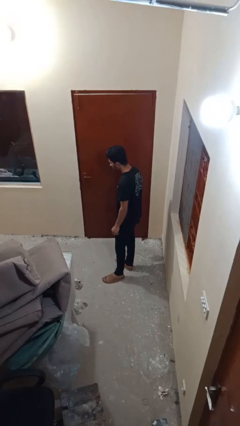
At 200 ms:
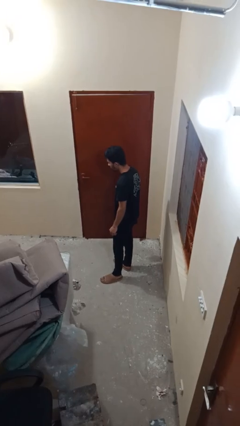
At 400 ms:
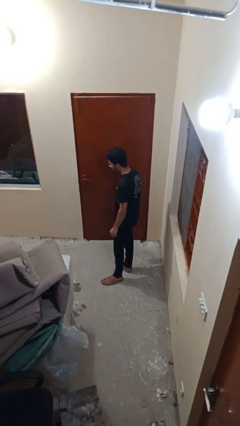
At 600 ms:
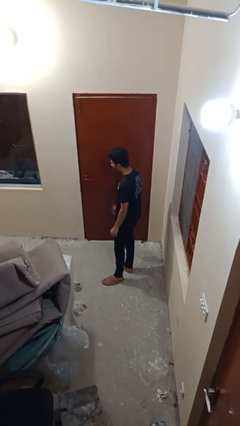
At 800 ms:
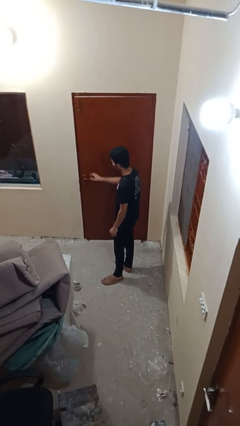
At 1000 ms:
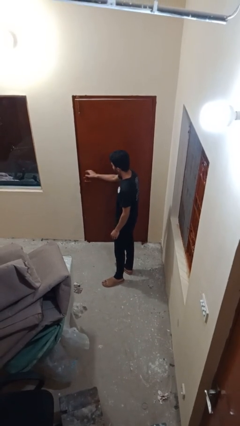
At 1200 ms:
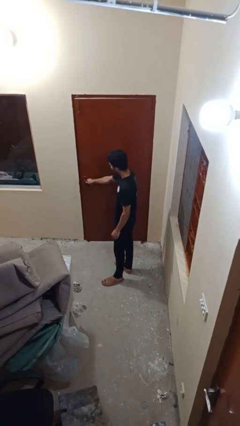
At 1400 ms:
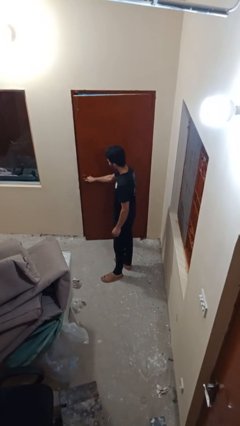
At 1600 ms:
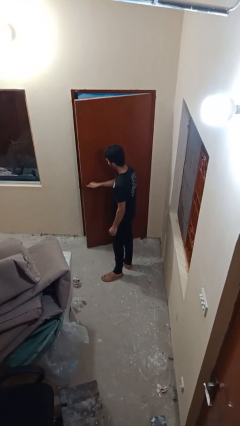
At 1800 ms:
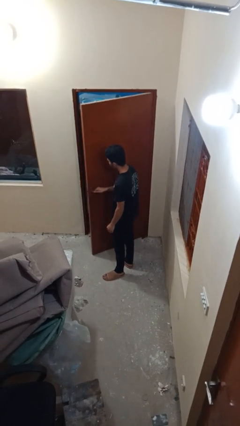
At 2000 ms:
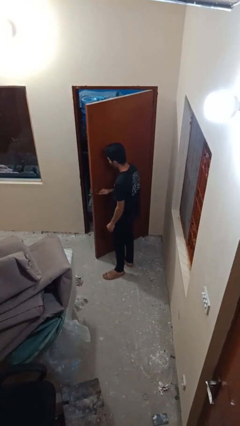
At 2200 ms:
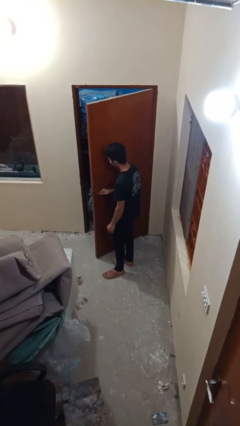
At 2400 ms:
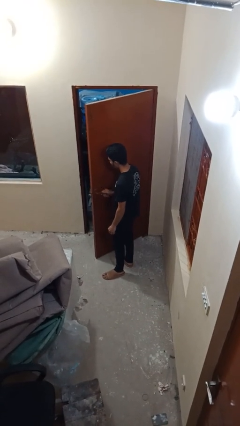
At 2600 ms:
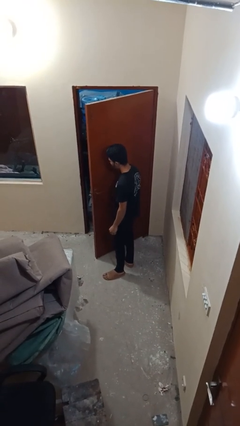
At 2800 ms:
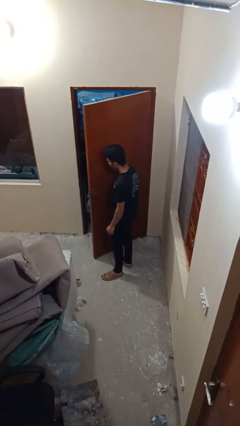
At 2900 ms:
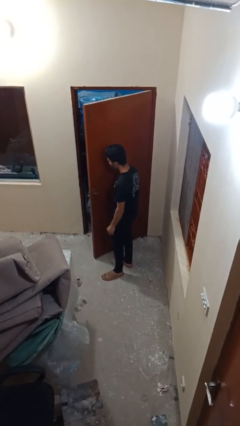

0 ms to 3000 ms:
person opens facility door

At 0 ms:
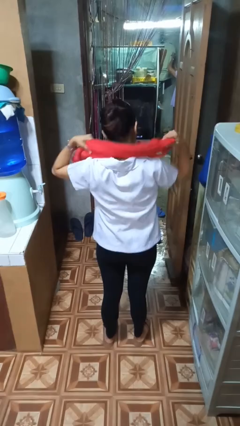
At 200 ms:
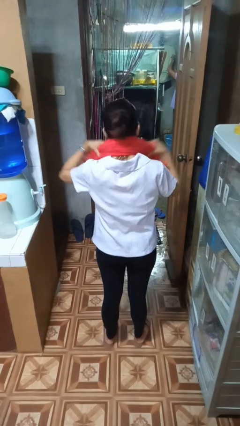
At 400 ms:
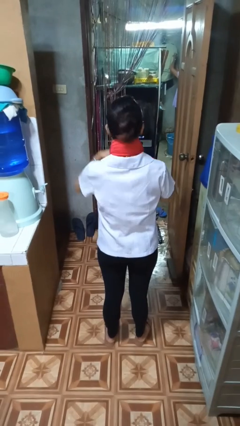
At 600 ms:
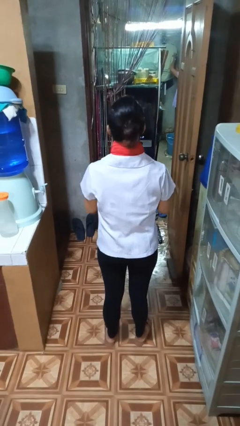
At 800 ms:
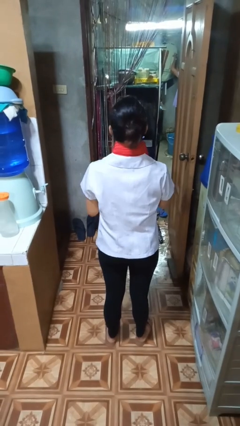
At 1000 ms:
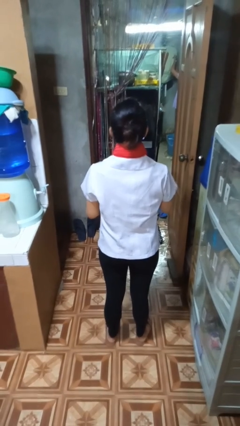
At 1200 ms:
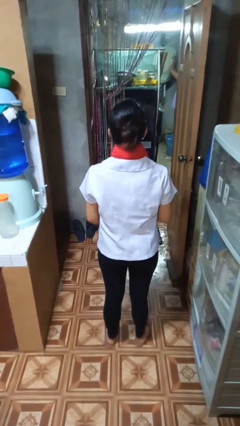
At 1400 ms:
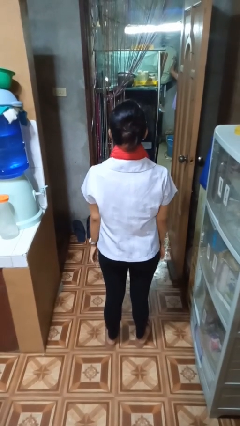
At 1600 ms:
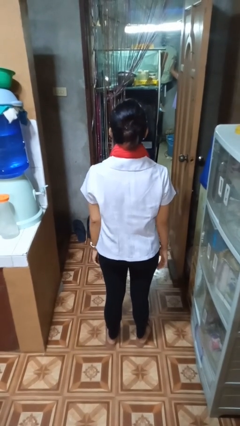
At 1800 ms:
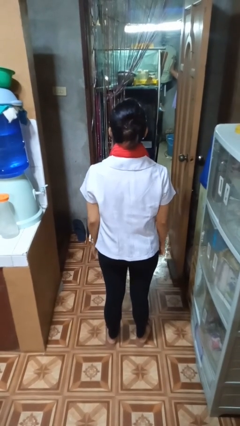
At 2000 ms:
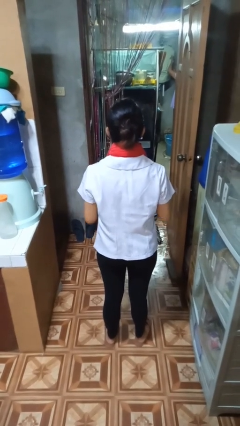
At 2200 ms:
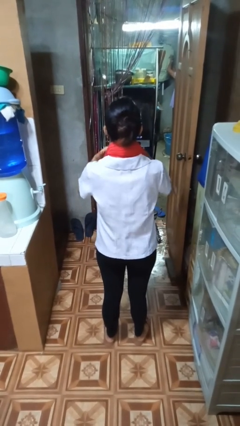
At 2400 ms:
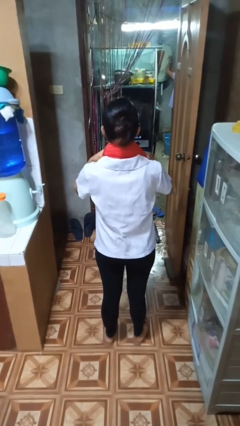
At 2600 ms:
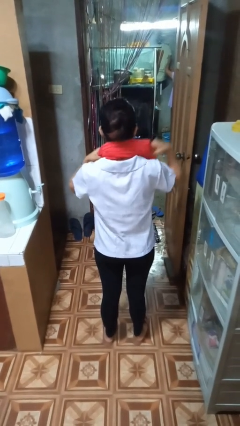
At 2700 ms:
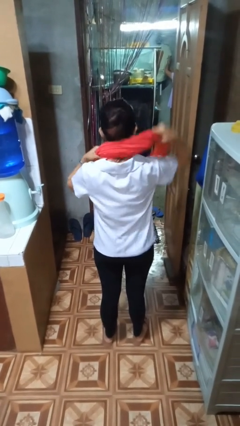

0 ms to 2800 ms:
person puts on scarf

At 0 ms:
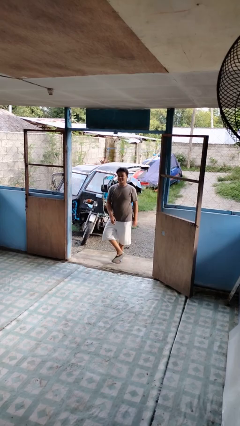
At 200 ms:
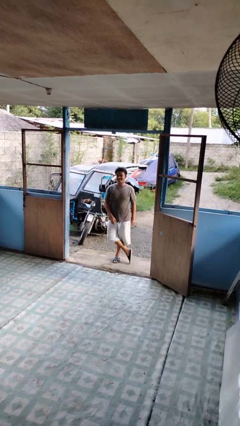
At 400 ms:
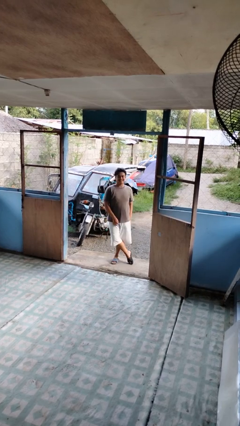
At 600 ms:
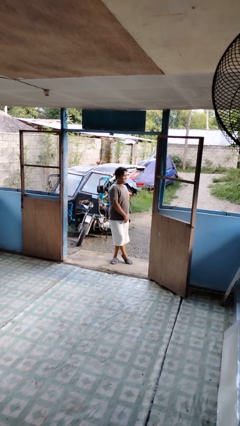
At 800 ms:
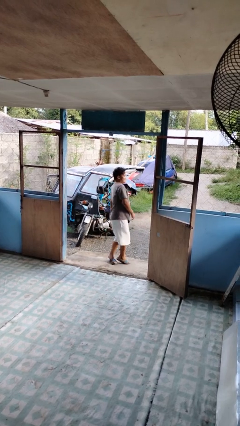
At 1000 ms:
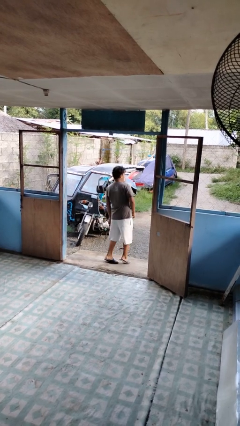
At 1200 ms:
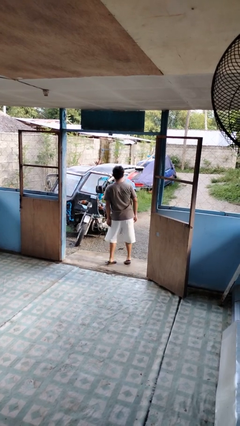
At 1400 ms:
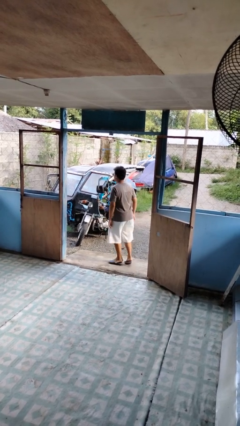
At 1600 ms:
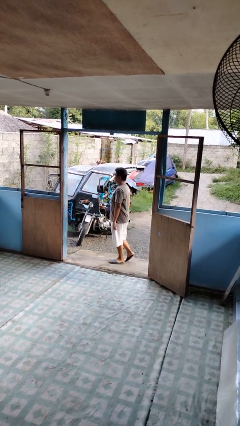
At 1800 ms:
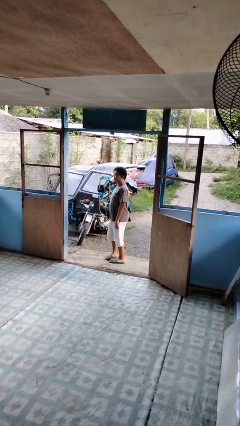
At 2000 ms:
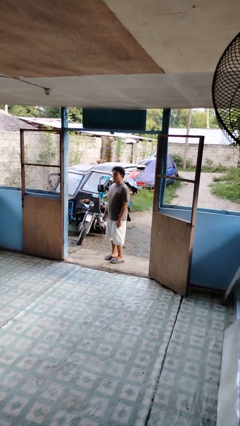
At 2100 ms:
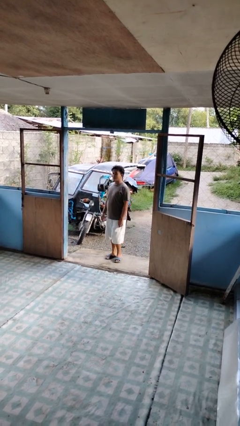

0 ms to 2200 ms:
person twirls

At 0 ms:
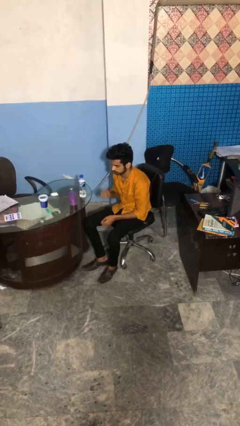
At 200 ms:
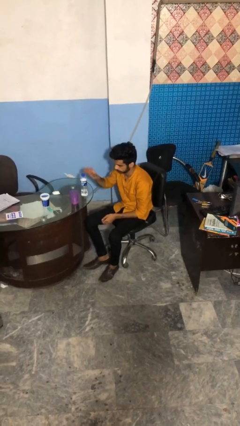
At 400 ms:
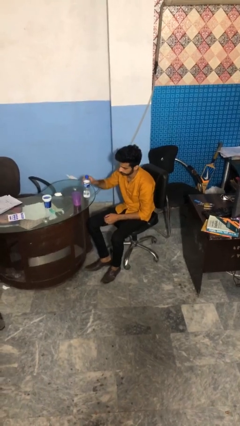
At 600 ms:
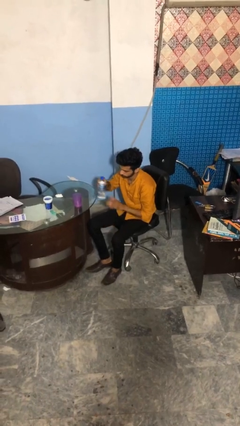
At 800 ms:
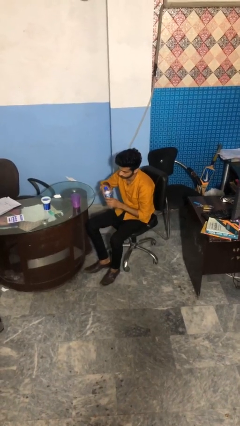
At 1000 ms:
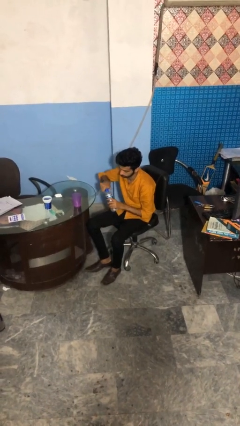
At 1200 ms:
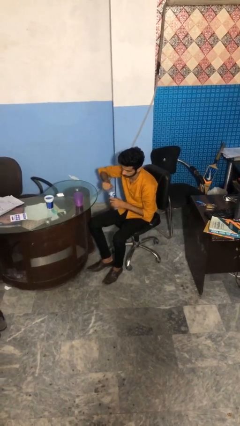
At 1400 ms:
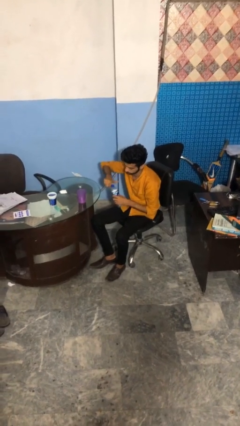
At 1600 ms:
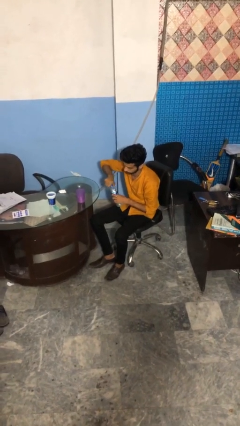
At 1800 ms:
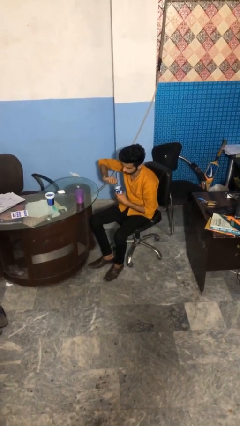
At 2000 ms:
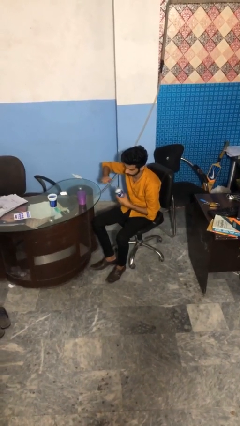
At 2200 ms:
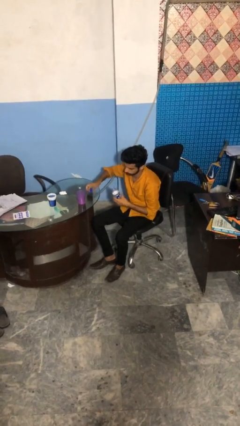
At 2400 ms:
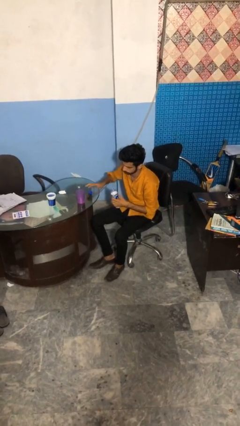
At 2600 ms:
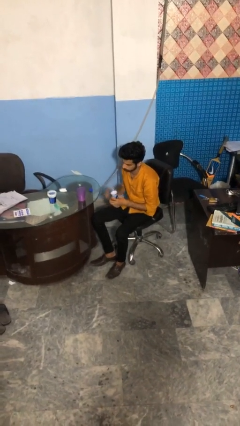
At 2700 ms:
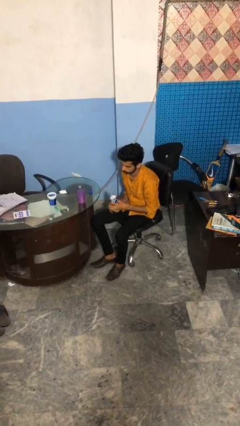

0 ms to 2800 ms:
person unscrews lid from bottle

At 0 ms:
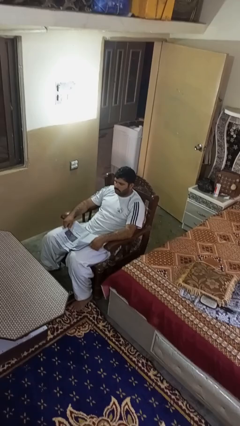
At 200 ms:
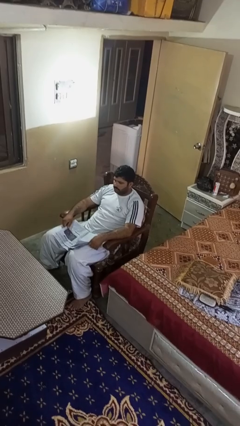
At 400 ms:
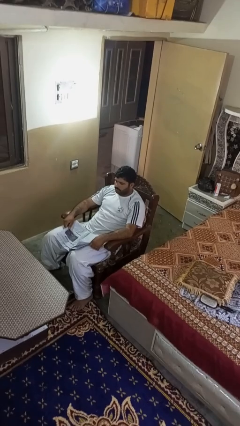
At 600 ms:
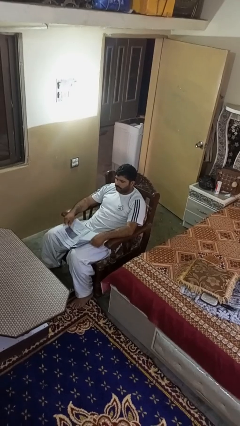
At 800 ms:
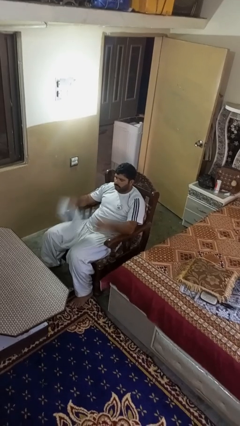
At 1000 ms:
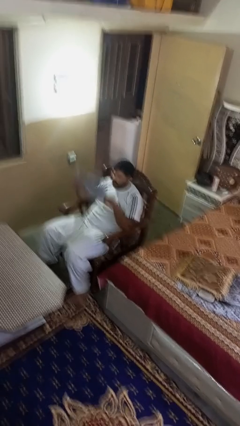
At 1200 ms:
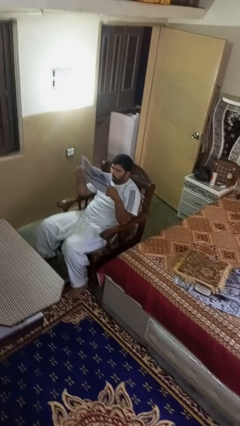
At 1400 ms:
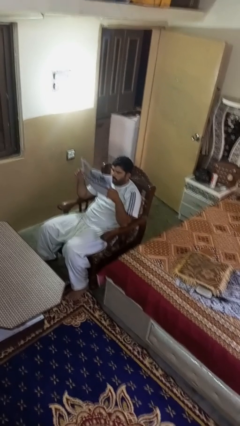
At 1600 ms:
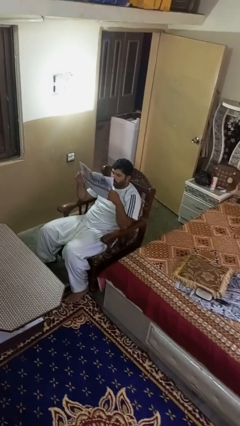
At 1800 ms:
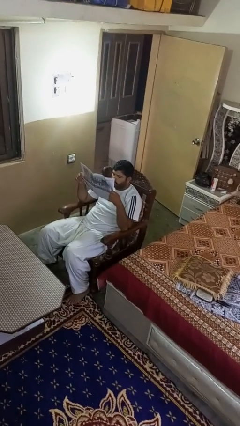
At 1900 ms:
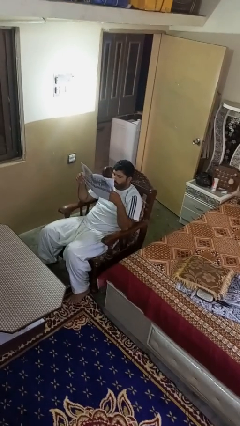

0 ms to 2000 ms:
person reads newspaper

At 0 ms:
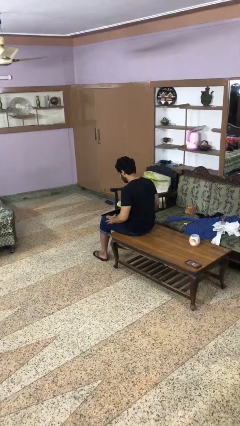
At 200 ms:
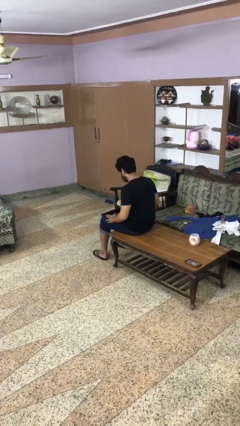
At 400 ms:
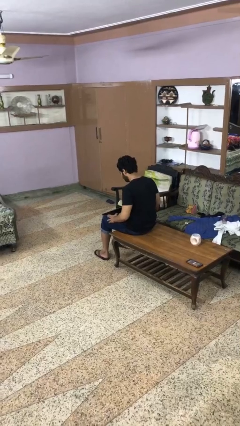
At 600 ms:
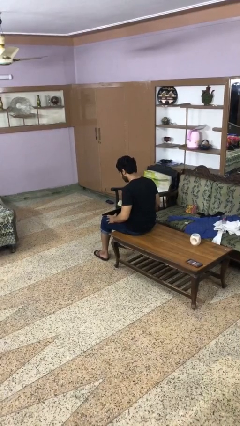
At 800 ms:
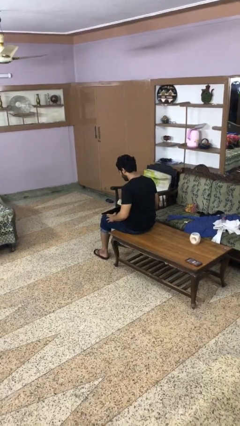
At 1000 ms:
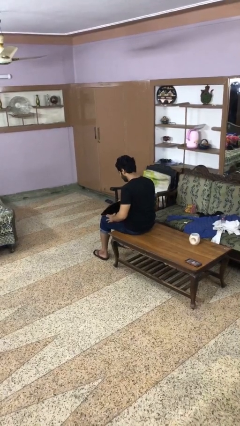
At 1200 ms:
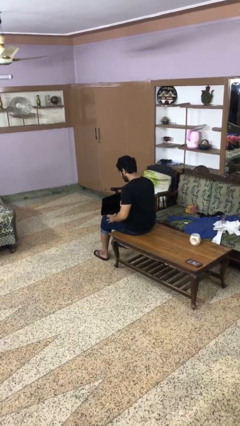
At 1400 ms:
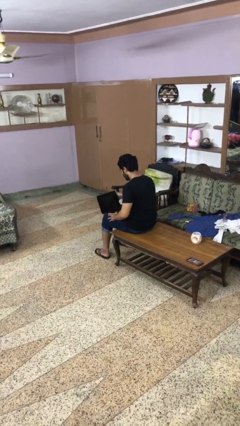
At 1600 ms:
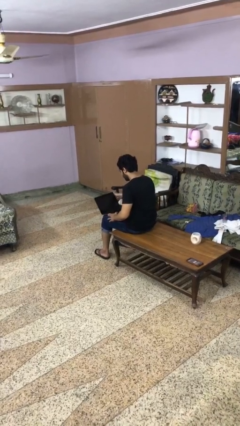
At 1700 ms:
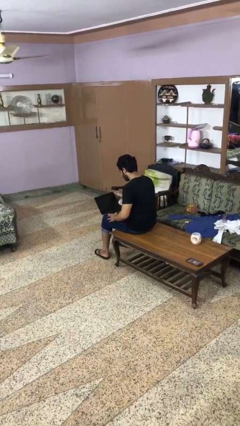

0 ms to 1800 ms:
person opens laptop

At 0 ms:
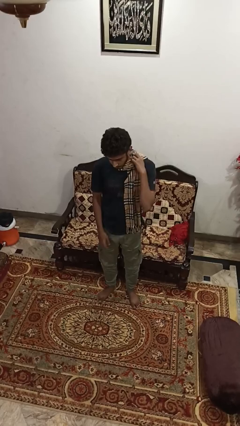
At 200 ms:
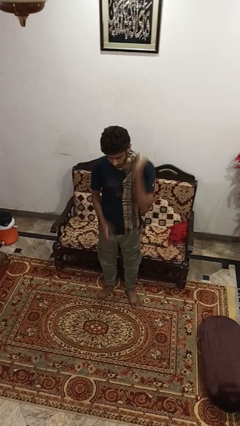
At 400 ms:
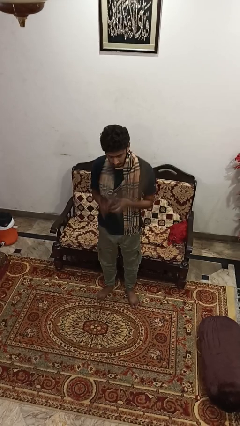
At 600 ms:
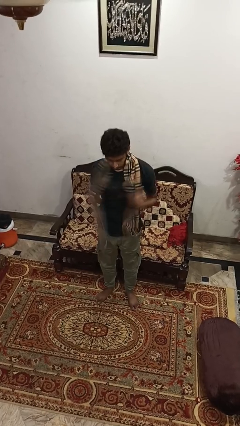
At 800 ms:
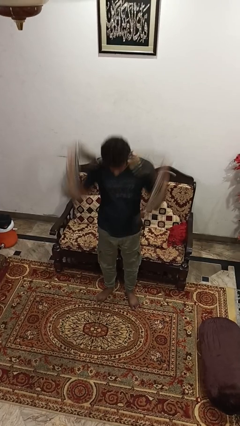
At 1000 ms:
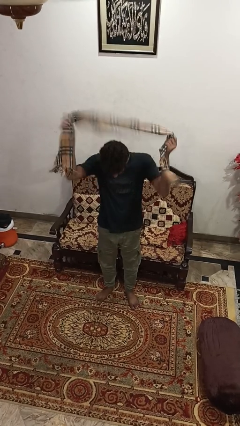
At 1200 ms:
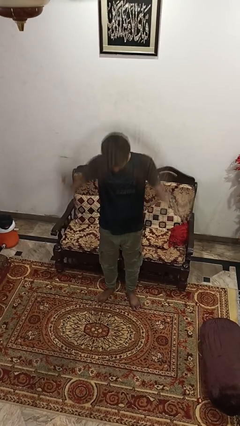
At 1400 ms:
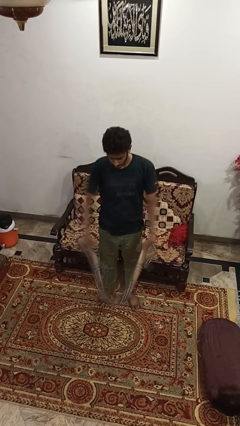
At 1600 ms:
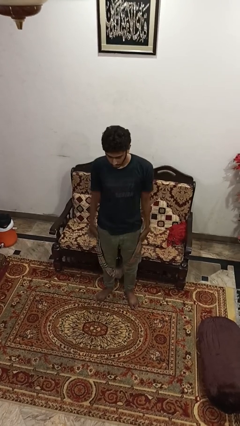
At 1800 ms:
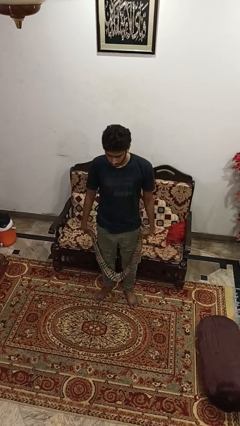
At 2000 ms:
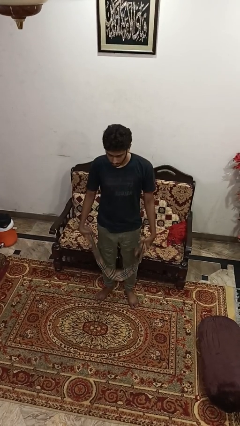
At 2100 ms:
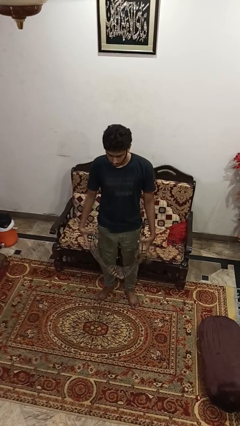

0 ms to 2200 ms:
person takes off scarf
